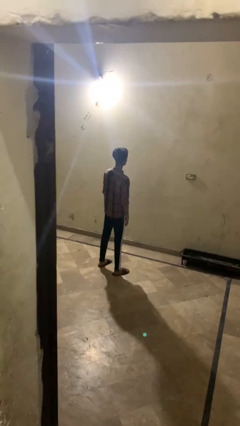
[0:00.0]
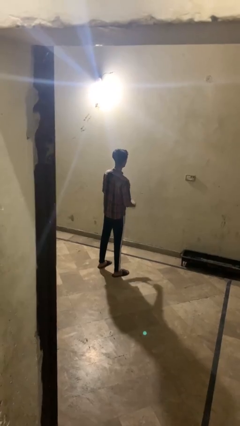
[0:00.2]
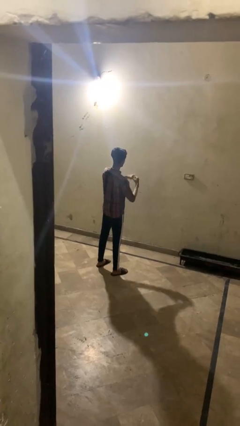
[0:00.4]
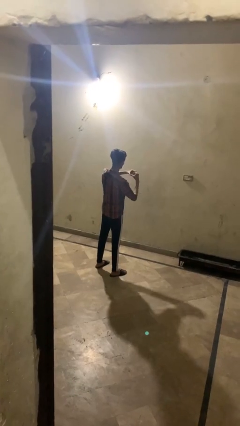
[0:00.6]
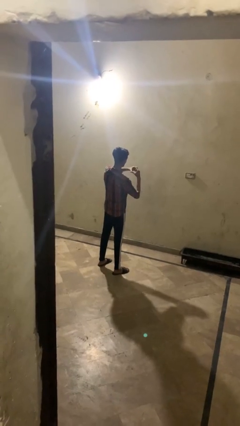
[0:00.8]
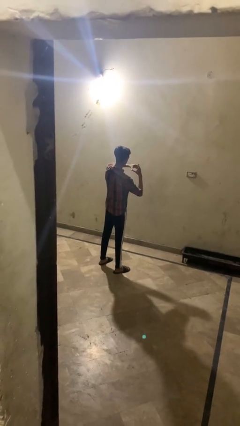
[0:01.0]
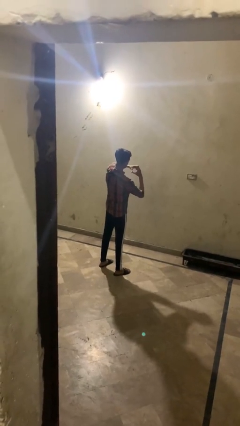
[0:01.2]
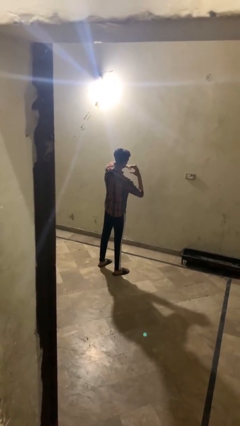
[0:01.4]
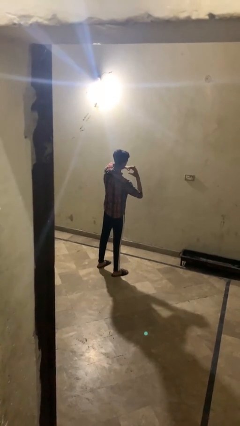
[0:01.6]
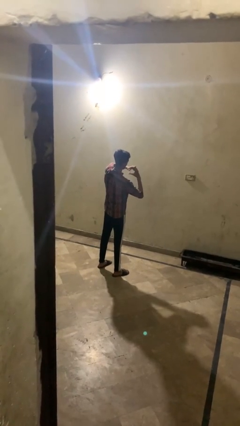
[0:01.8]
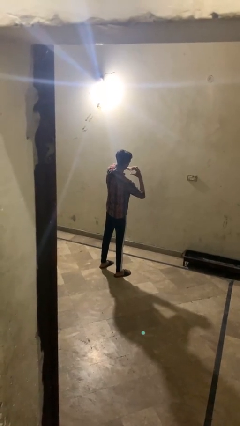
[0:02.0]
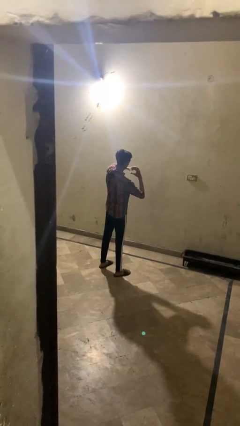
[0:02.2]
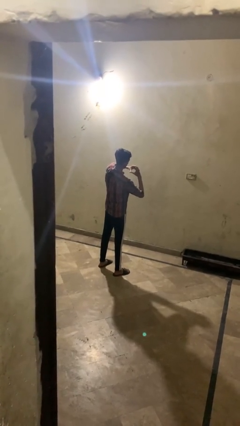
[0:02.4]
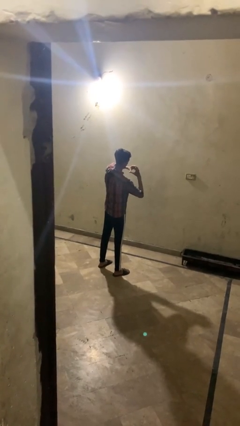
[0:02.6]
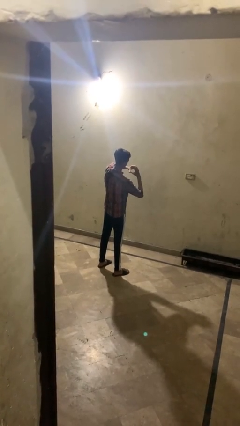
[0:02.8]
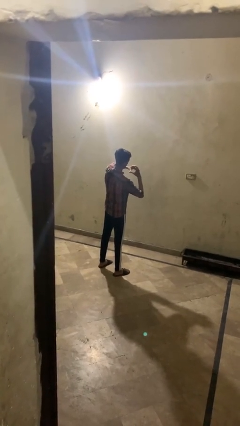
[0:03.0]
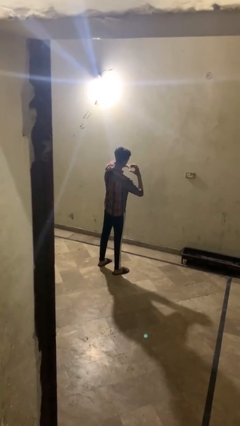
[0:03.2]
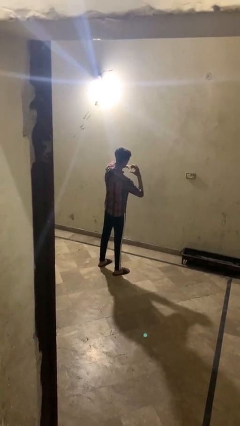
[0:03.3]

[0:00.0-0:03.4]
person gestures heart

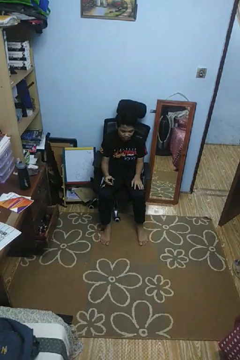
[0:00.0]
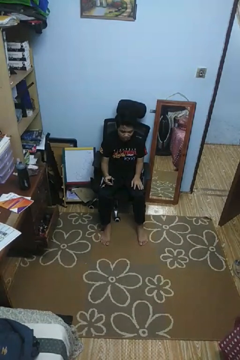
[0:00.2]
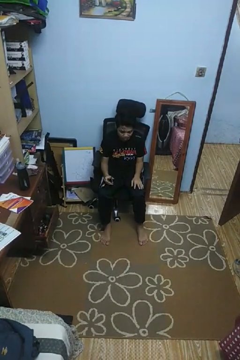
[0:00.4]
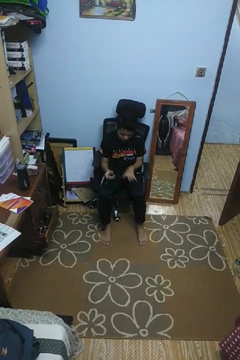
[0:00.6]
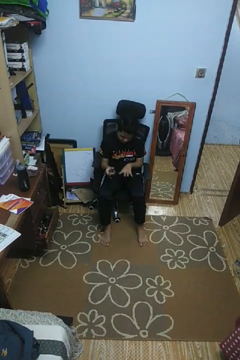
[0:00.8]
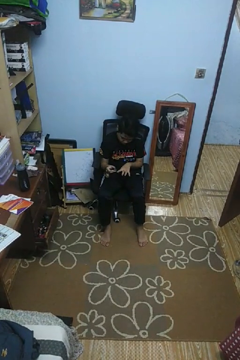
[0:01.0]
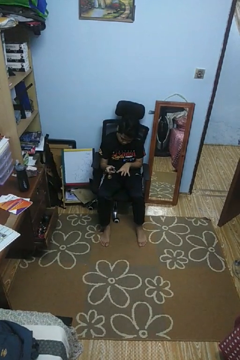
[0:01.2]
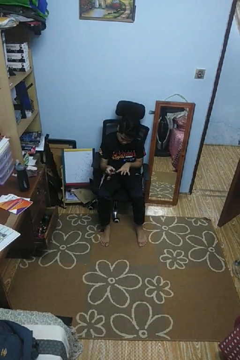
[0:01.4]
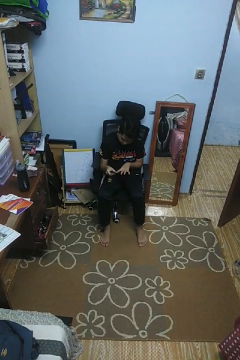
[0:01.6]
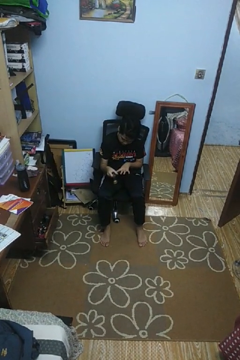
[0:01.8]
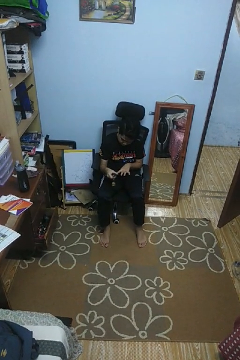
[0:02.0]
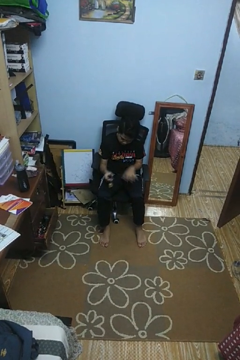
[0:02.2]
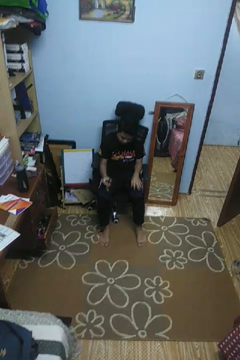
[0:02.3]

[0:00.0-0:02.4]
person clips fingernails

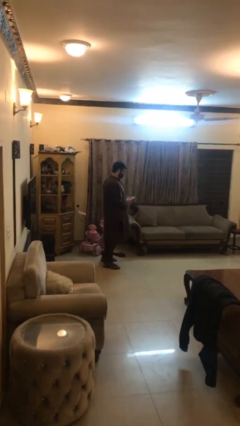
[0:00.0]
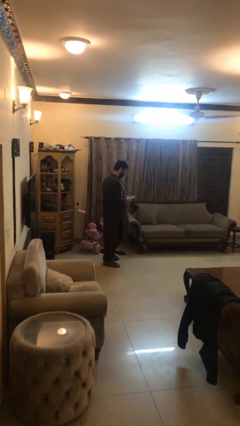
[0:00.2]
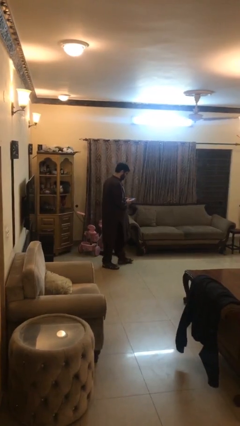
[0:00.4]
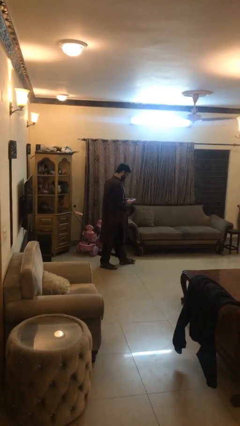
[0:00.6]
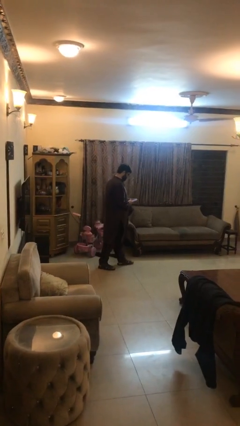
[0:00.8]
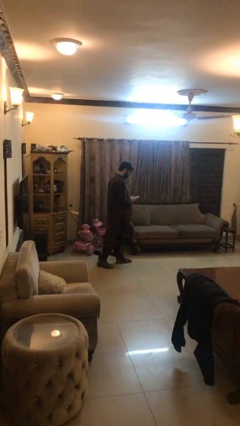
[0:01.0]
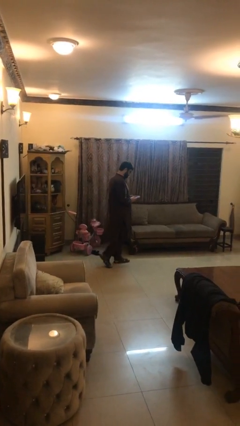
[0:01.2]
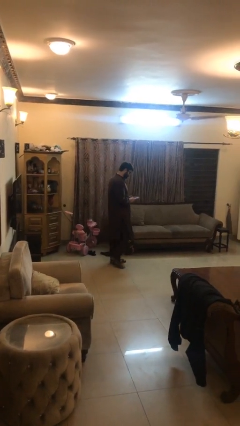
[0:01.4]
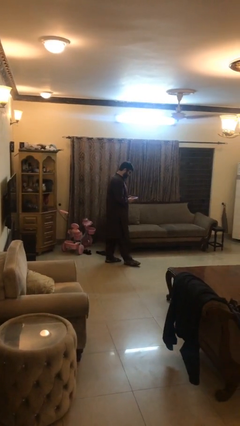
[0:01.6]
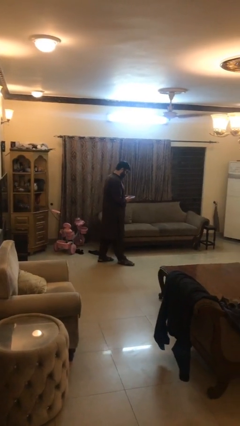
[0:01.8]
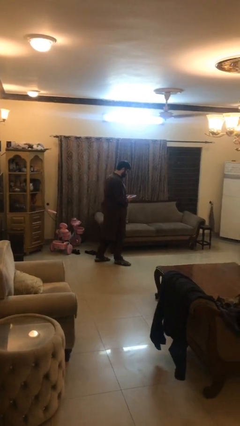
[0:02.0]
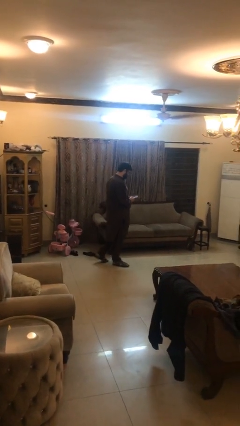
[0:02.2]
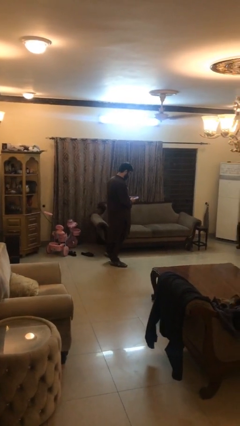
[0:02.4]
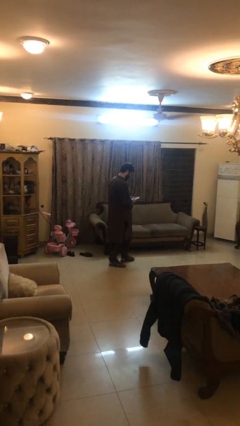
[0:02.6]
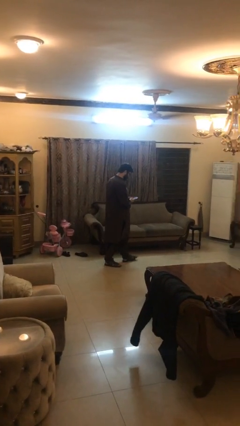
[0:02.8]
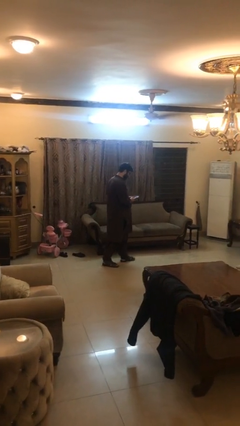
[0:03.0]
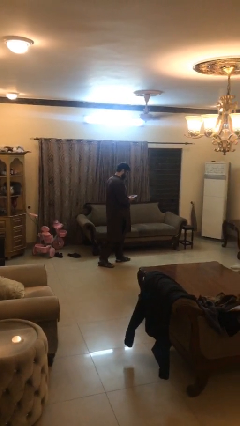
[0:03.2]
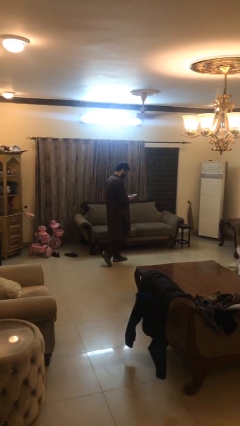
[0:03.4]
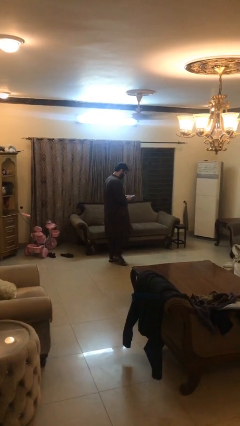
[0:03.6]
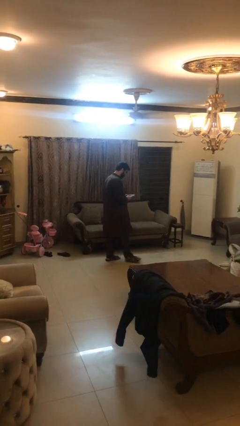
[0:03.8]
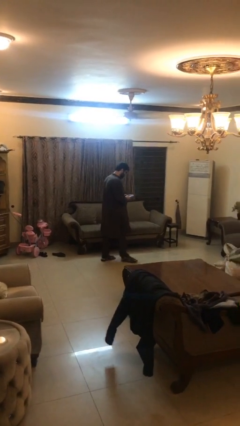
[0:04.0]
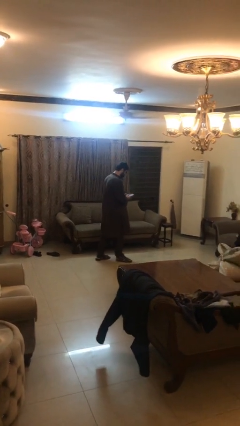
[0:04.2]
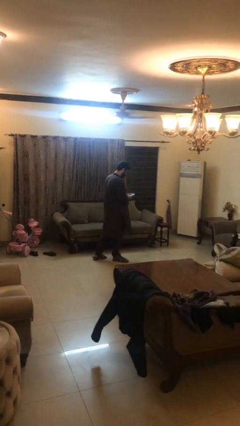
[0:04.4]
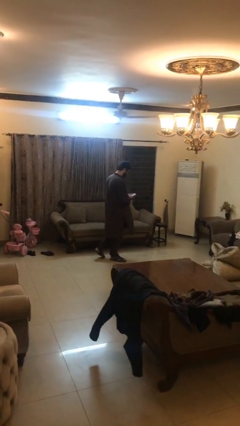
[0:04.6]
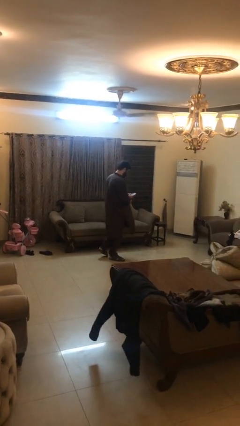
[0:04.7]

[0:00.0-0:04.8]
person texts on phone

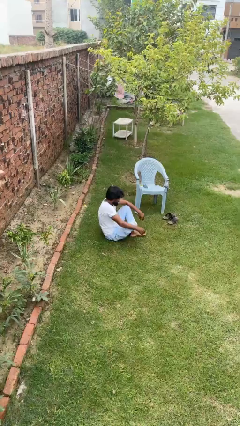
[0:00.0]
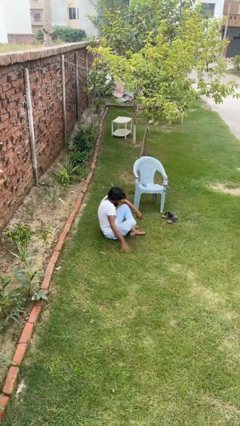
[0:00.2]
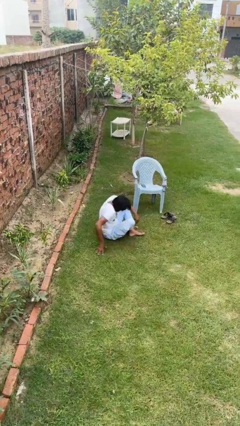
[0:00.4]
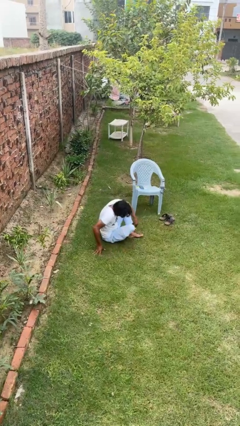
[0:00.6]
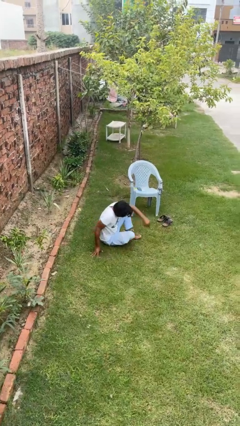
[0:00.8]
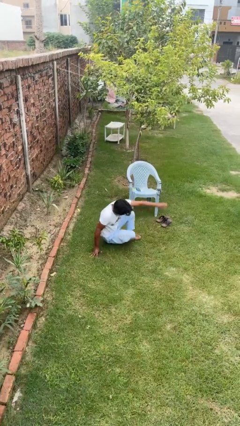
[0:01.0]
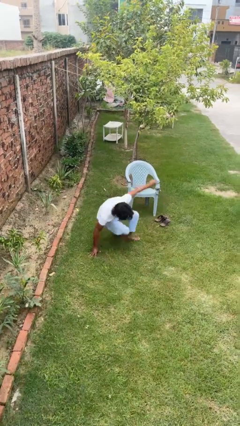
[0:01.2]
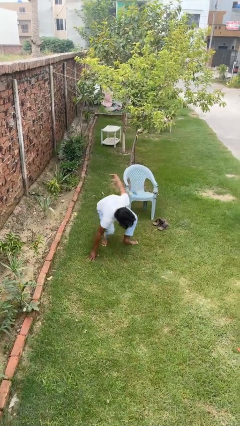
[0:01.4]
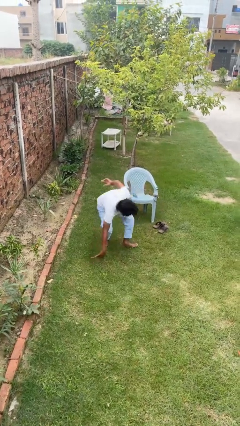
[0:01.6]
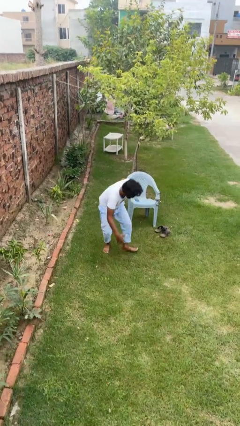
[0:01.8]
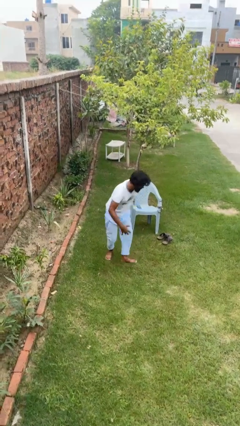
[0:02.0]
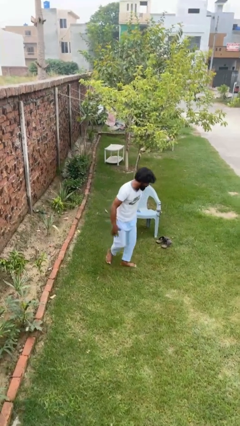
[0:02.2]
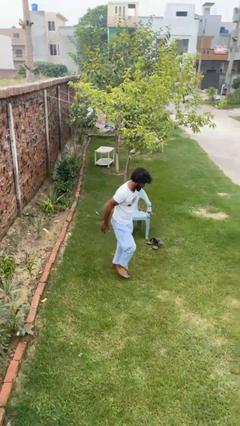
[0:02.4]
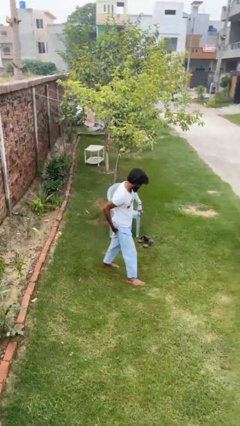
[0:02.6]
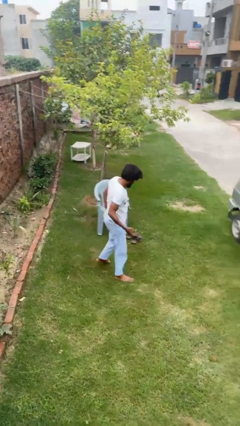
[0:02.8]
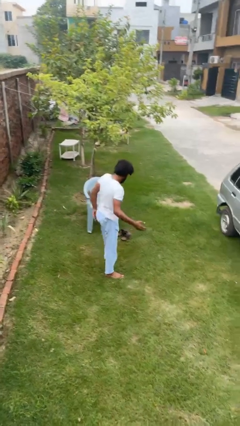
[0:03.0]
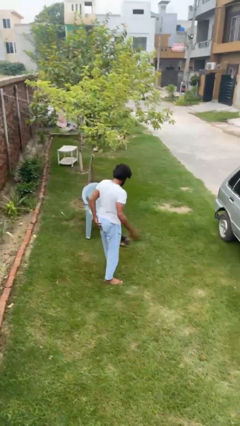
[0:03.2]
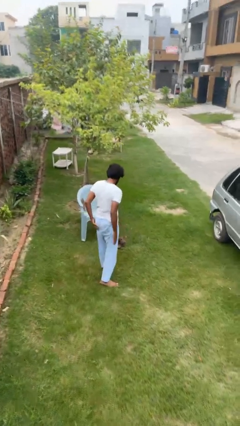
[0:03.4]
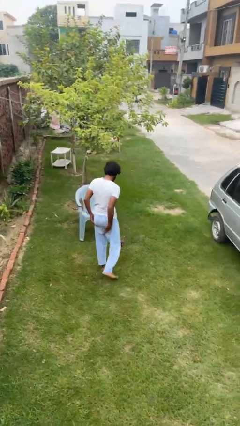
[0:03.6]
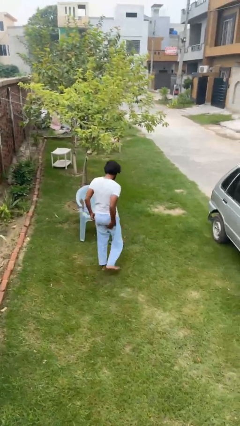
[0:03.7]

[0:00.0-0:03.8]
person stands up from floor

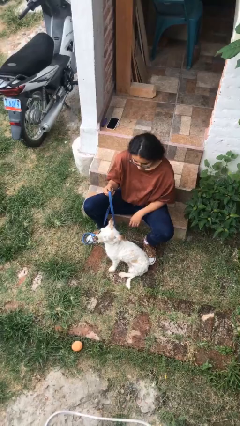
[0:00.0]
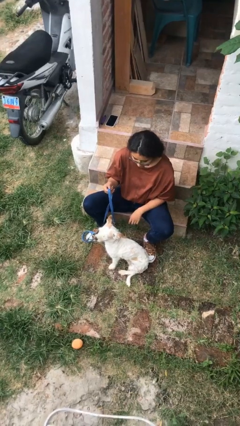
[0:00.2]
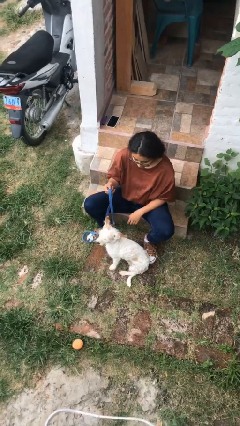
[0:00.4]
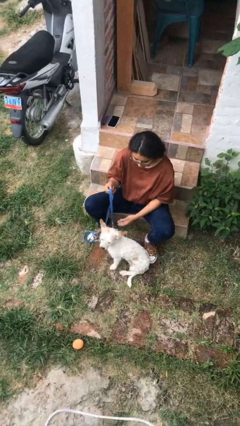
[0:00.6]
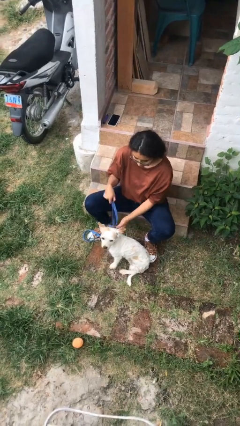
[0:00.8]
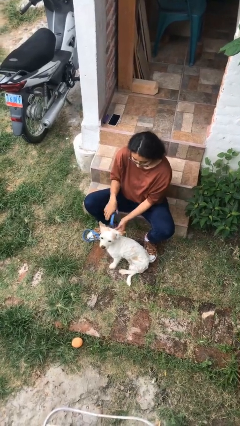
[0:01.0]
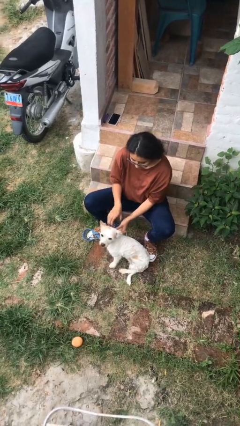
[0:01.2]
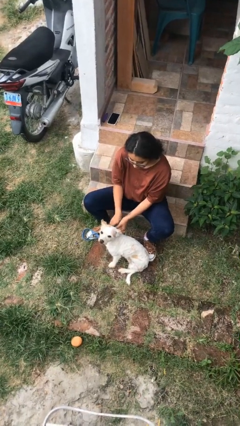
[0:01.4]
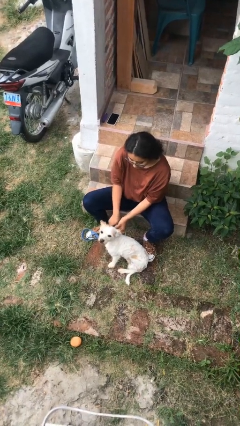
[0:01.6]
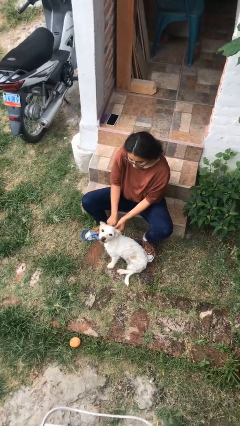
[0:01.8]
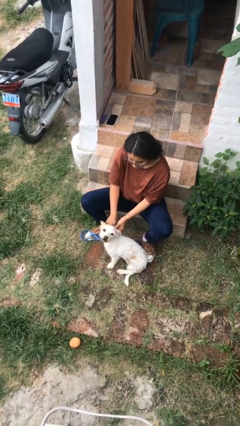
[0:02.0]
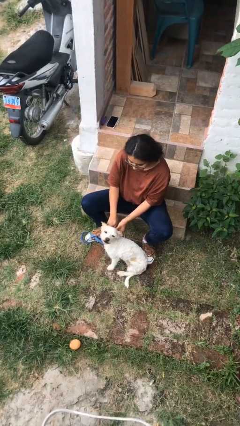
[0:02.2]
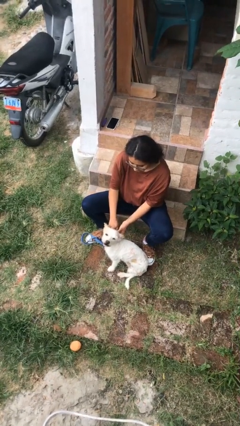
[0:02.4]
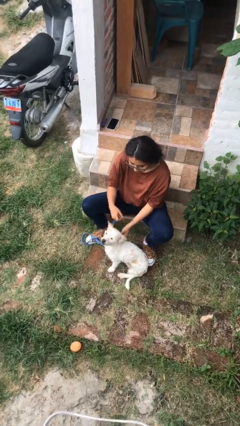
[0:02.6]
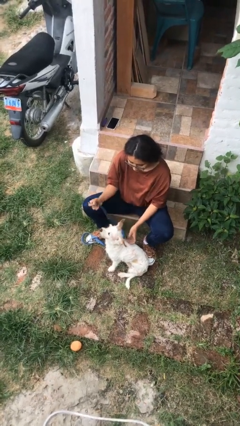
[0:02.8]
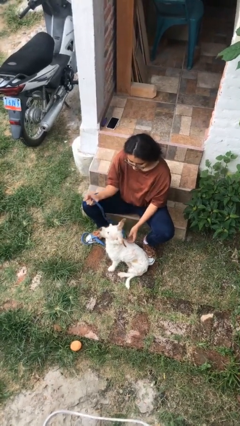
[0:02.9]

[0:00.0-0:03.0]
person unattaches leash from dog

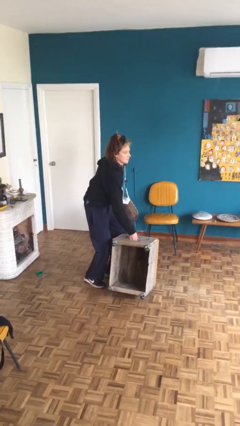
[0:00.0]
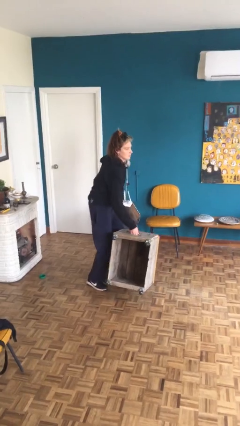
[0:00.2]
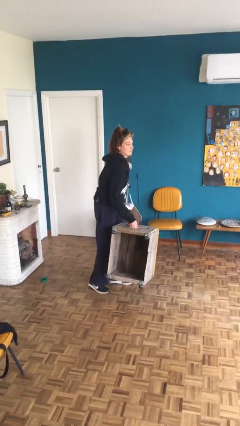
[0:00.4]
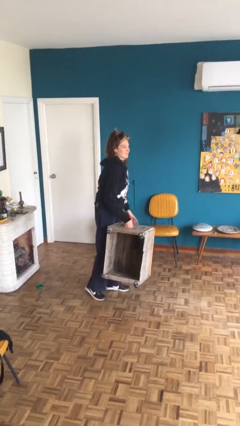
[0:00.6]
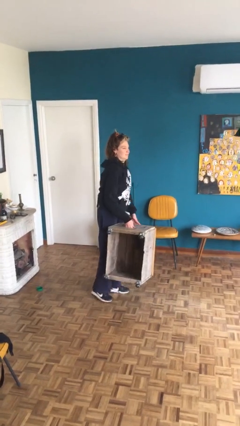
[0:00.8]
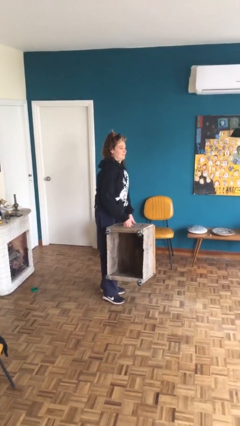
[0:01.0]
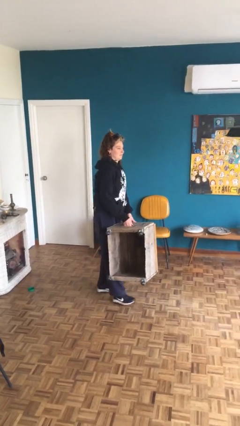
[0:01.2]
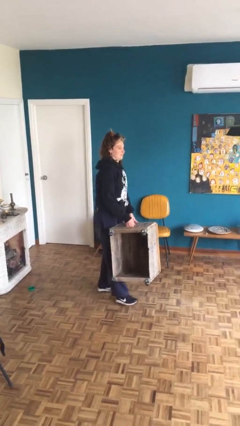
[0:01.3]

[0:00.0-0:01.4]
person picks up object from floor
